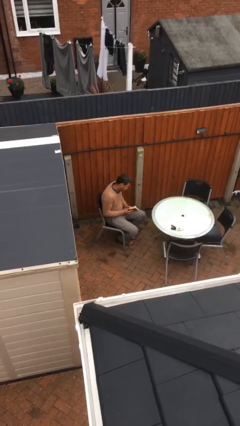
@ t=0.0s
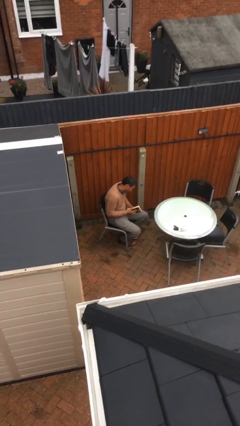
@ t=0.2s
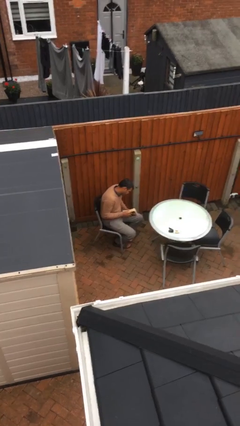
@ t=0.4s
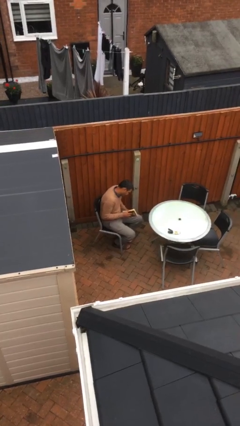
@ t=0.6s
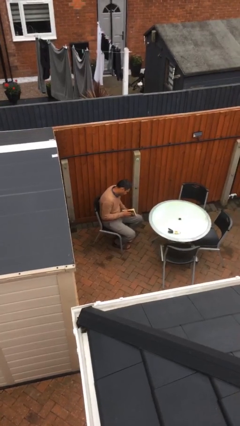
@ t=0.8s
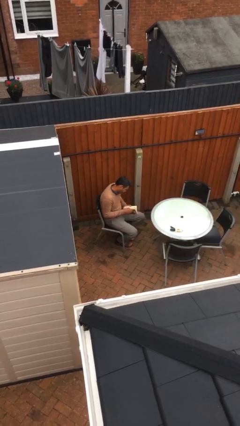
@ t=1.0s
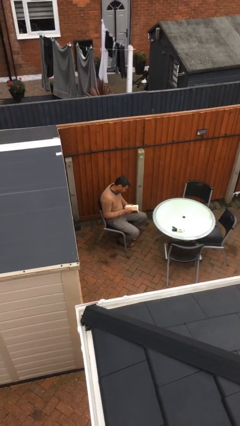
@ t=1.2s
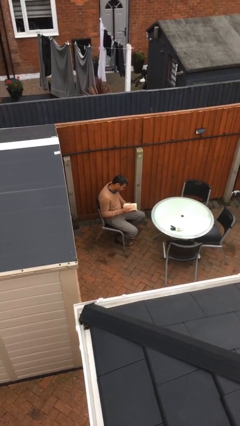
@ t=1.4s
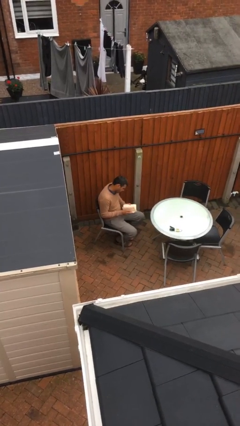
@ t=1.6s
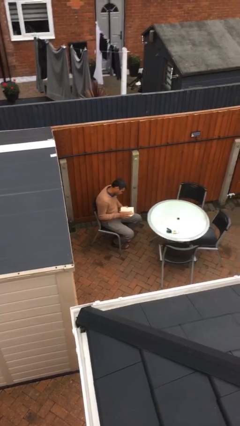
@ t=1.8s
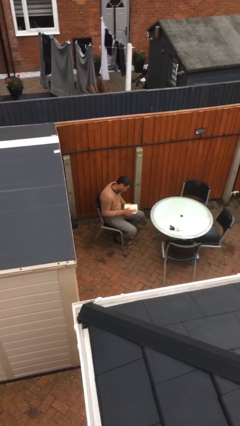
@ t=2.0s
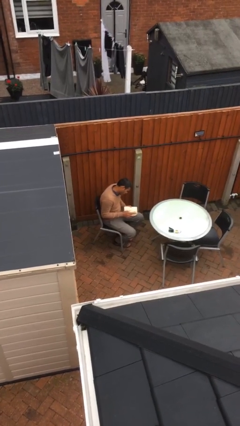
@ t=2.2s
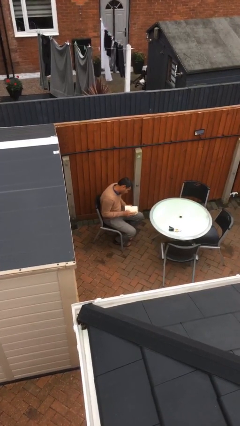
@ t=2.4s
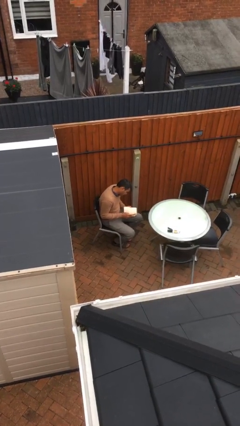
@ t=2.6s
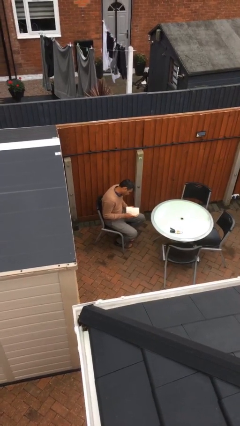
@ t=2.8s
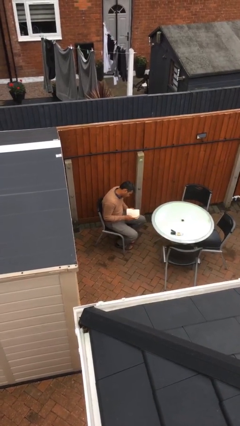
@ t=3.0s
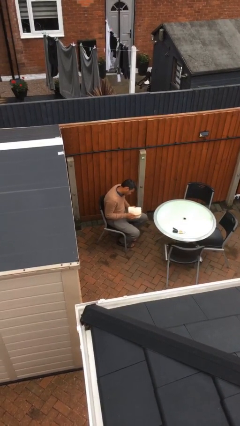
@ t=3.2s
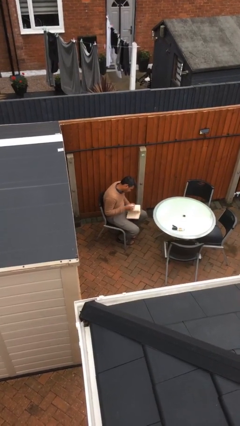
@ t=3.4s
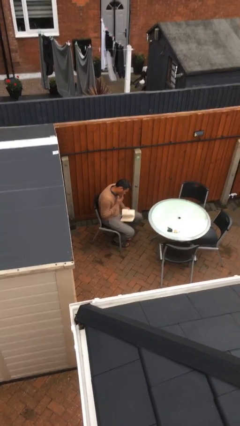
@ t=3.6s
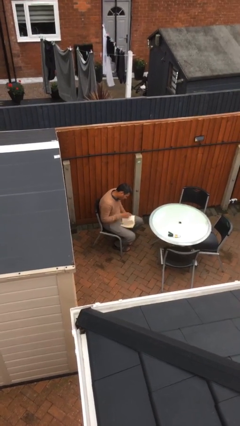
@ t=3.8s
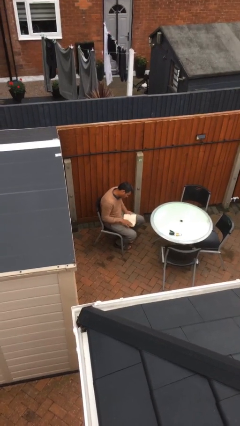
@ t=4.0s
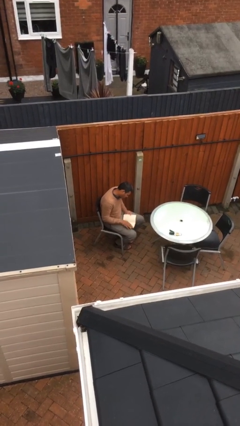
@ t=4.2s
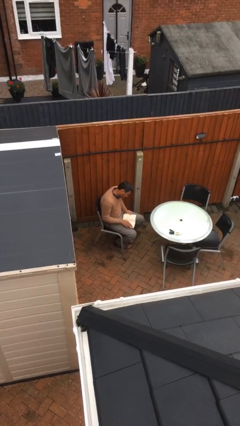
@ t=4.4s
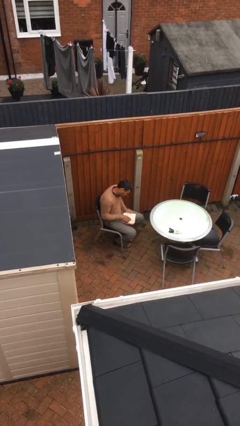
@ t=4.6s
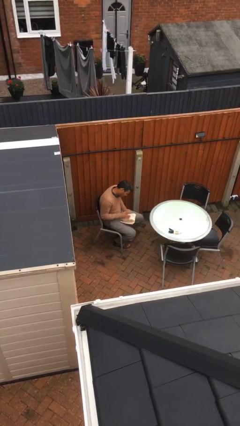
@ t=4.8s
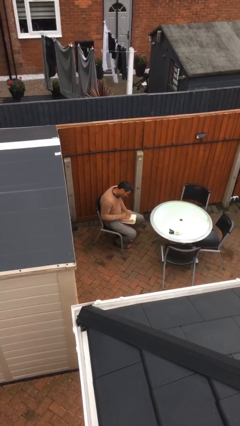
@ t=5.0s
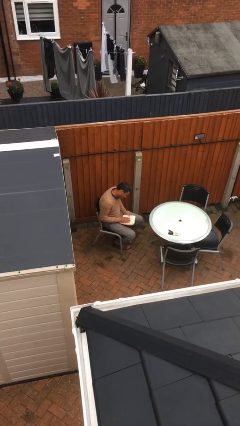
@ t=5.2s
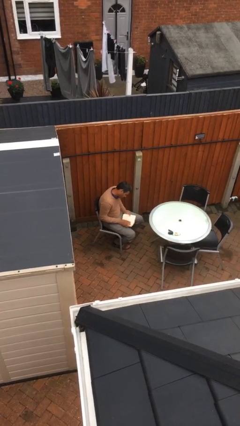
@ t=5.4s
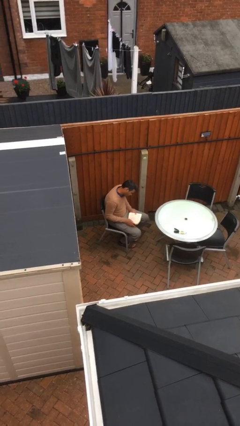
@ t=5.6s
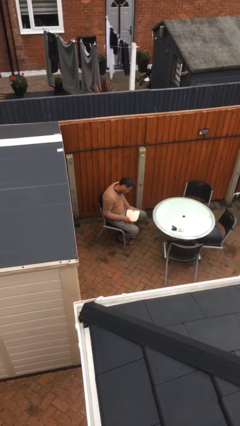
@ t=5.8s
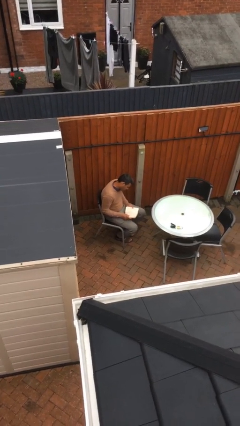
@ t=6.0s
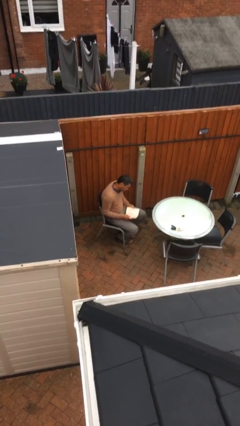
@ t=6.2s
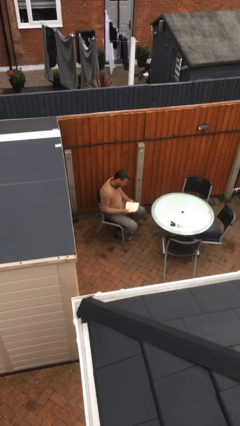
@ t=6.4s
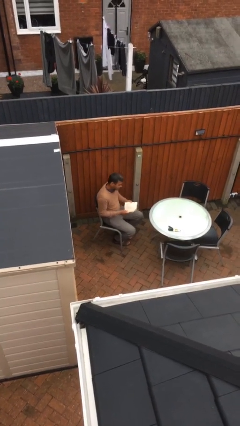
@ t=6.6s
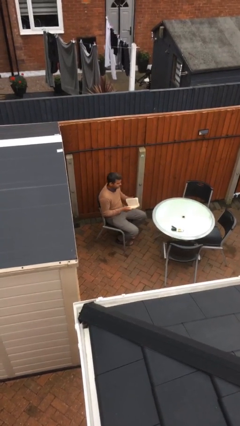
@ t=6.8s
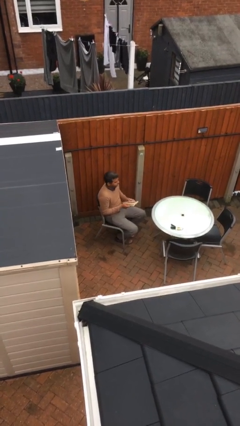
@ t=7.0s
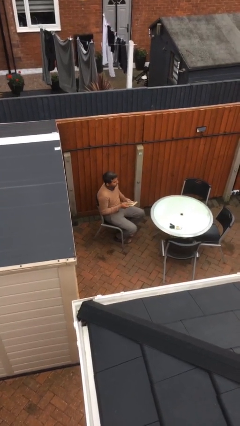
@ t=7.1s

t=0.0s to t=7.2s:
person reads document

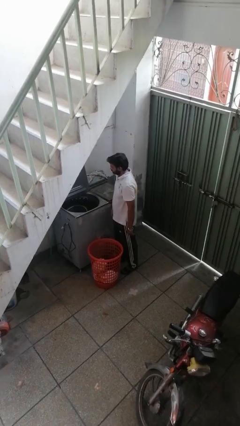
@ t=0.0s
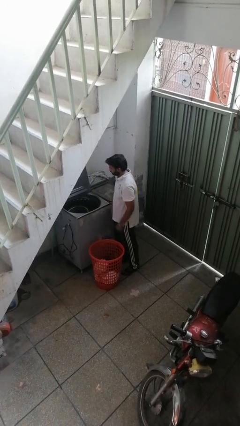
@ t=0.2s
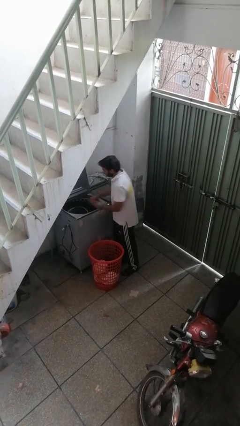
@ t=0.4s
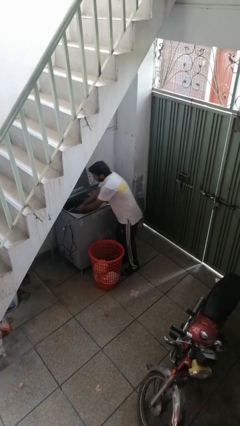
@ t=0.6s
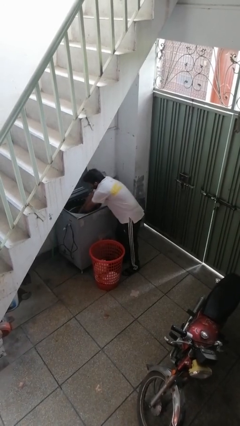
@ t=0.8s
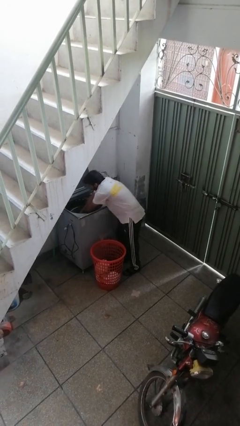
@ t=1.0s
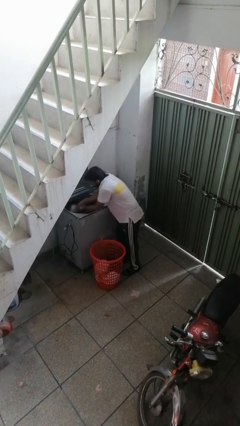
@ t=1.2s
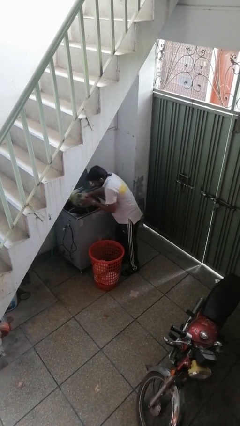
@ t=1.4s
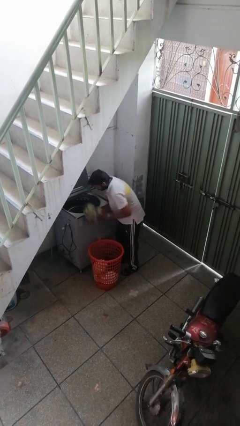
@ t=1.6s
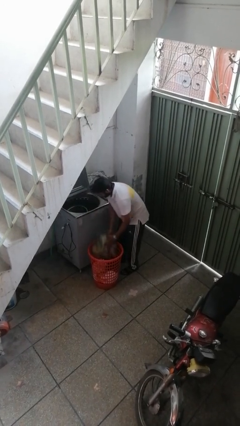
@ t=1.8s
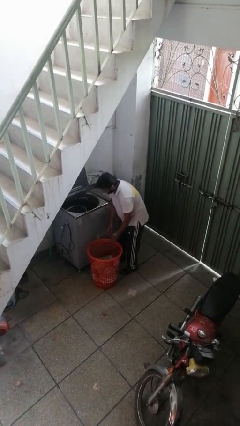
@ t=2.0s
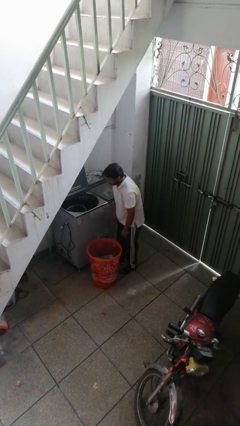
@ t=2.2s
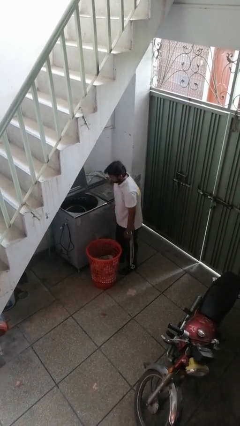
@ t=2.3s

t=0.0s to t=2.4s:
person loads clotheswasher

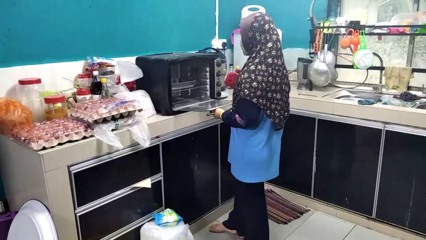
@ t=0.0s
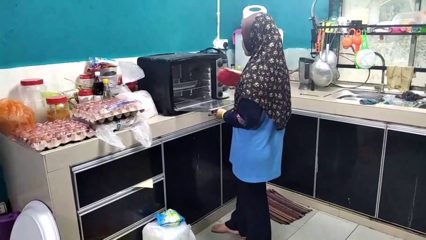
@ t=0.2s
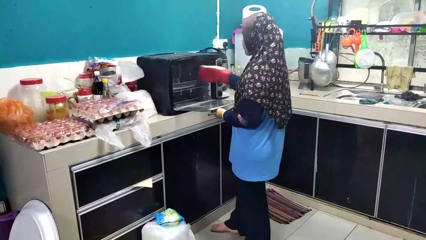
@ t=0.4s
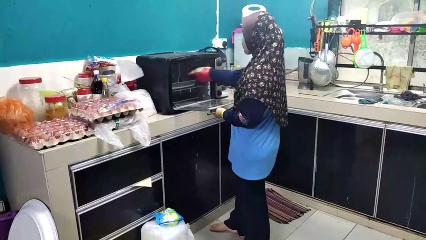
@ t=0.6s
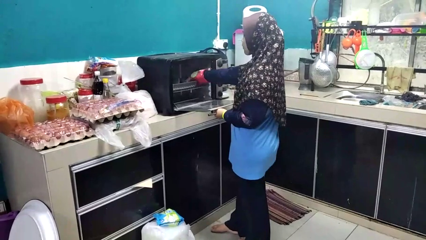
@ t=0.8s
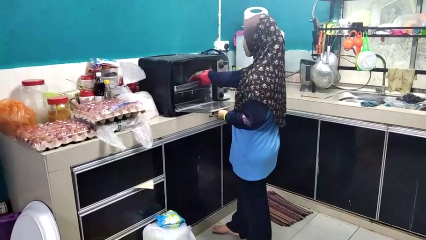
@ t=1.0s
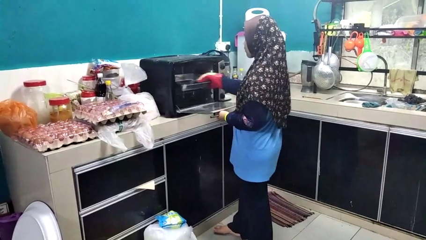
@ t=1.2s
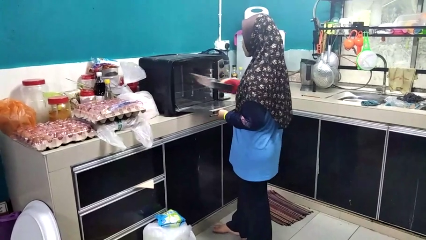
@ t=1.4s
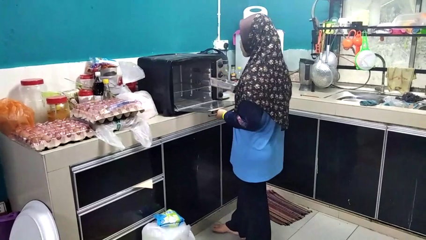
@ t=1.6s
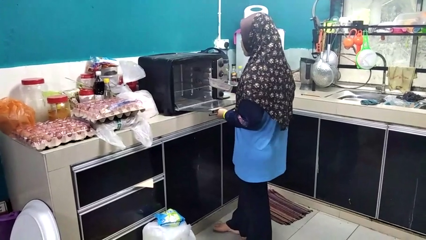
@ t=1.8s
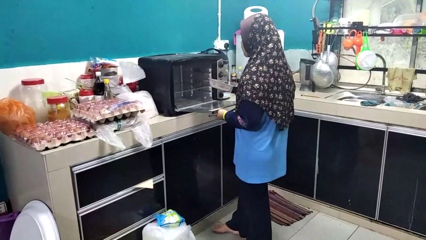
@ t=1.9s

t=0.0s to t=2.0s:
person takes object from oven

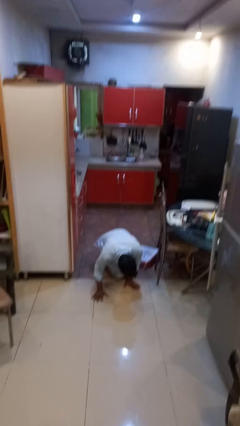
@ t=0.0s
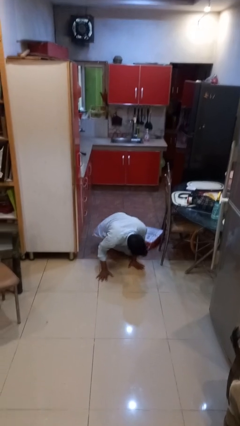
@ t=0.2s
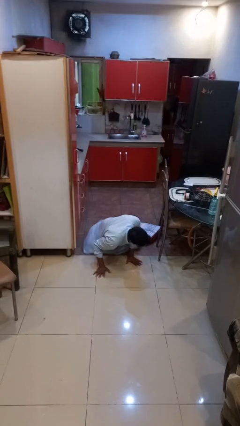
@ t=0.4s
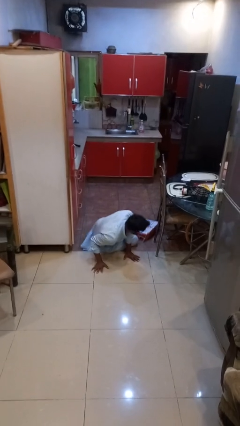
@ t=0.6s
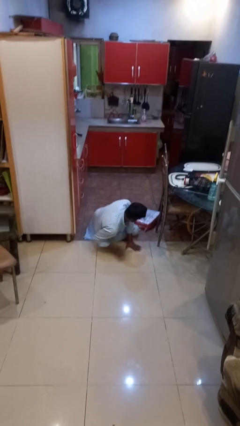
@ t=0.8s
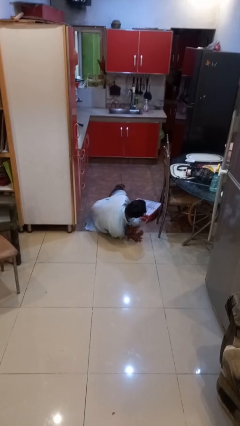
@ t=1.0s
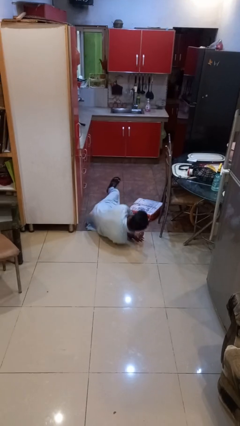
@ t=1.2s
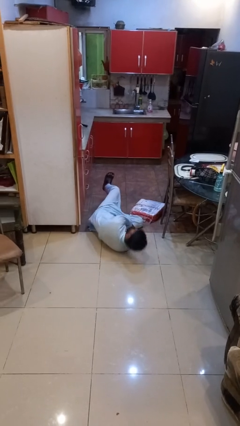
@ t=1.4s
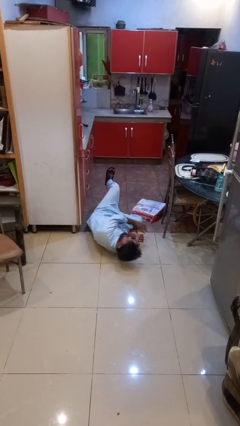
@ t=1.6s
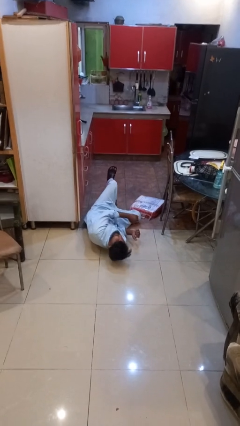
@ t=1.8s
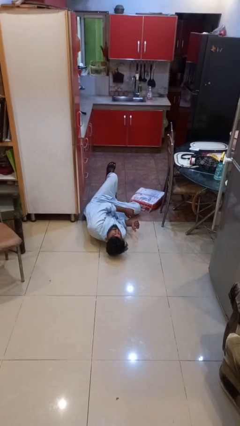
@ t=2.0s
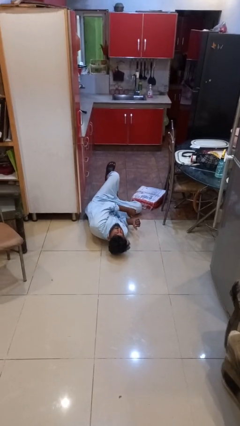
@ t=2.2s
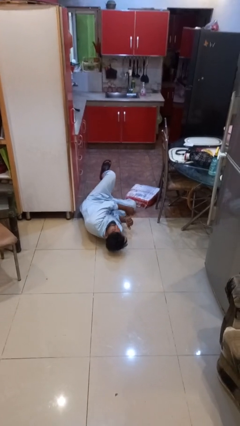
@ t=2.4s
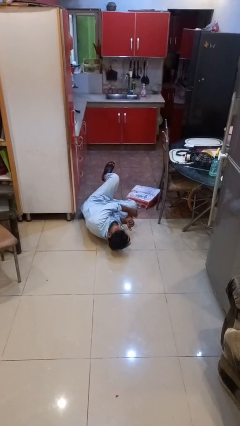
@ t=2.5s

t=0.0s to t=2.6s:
person lies down on floor

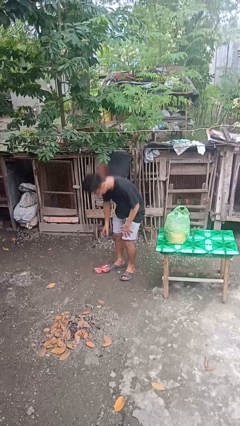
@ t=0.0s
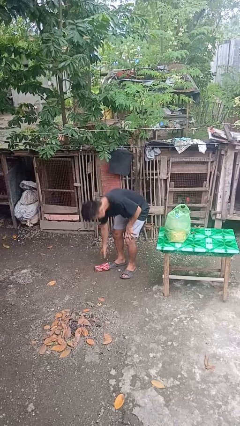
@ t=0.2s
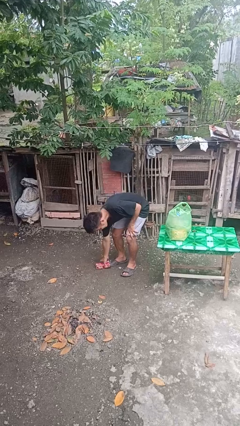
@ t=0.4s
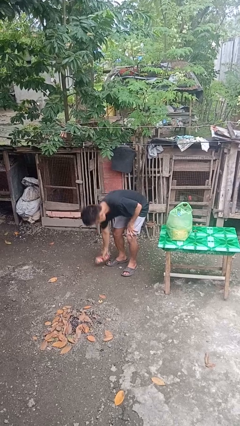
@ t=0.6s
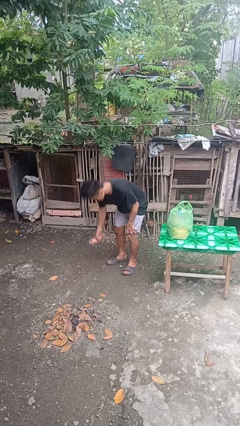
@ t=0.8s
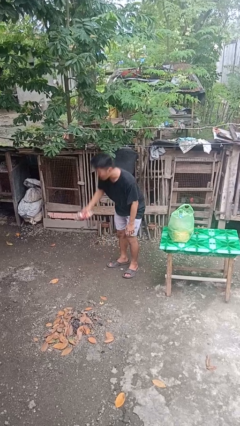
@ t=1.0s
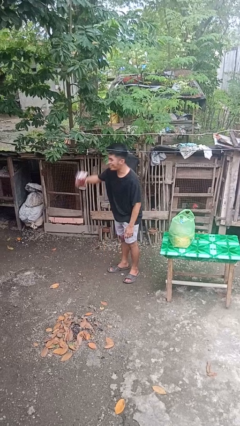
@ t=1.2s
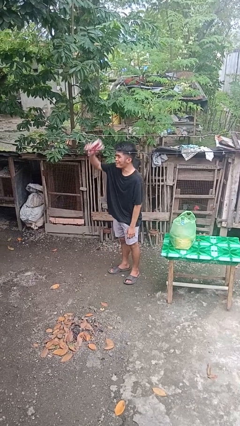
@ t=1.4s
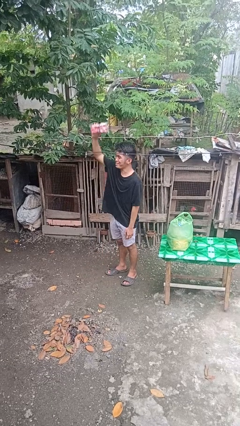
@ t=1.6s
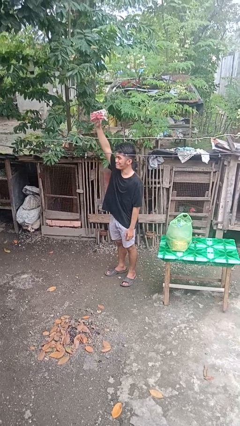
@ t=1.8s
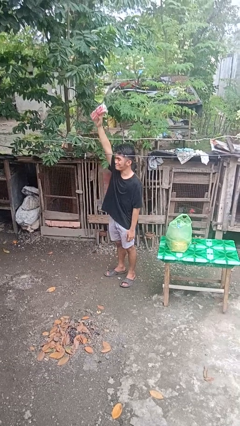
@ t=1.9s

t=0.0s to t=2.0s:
person picks up object from floor

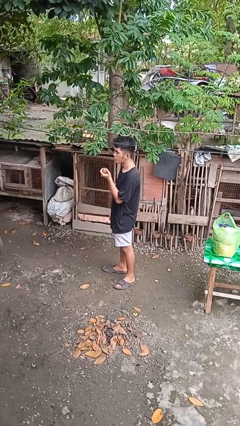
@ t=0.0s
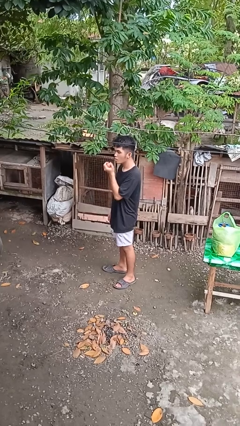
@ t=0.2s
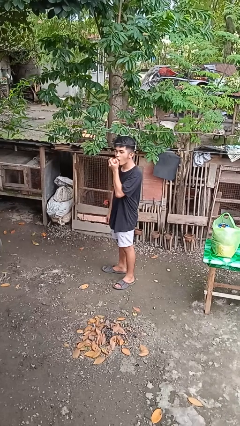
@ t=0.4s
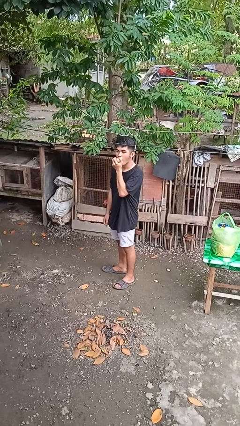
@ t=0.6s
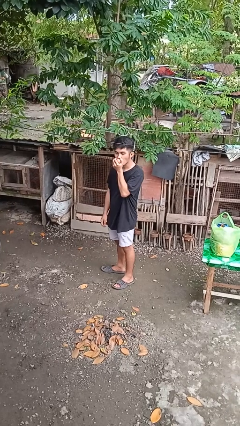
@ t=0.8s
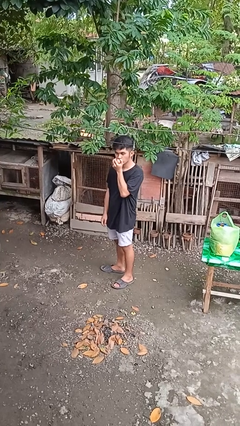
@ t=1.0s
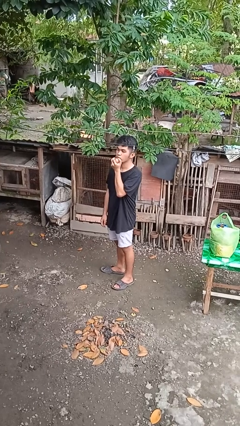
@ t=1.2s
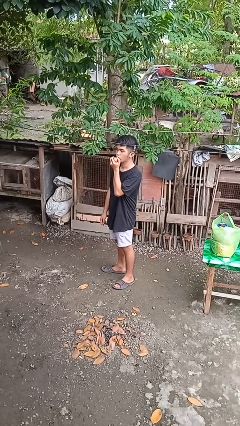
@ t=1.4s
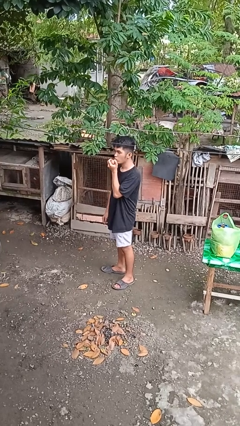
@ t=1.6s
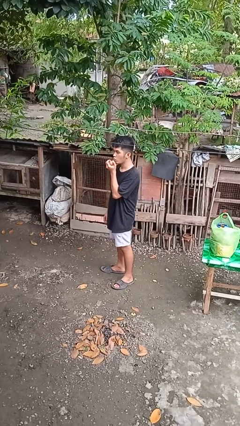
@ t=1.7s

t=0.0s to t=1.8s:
person eats apple
